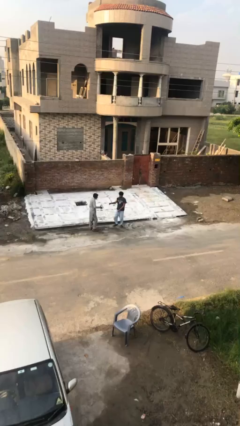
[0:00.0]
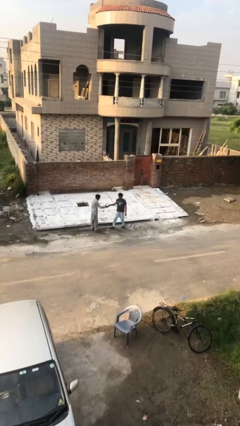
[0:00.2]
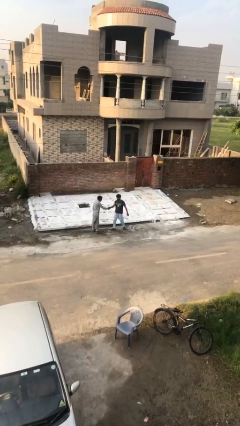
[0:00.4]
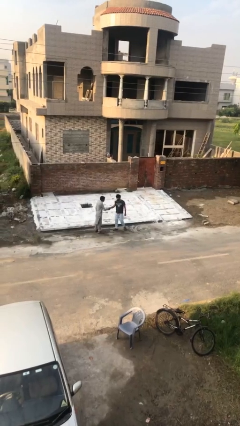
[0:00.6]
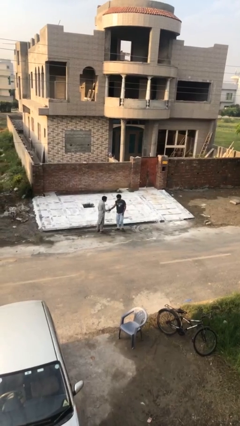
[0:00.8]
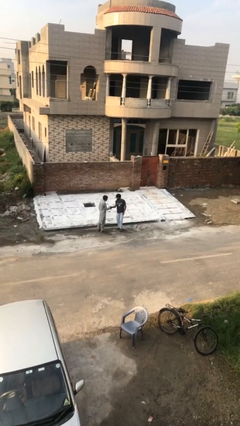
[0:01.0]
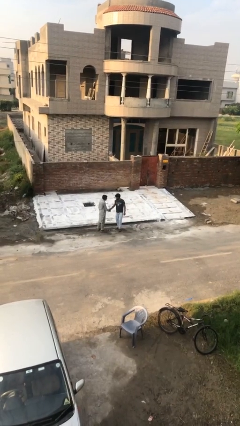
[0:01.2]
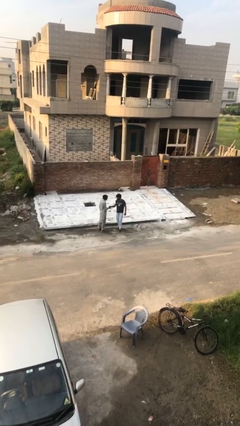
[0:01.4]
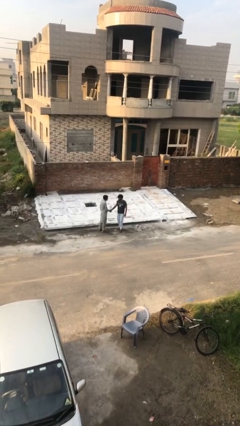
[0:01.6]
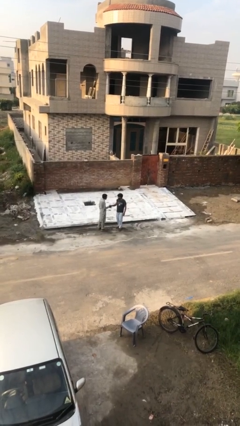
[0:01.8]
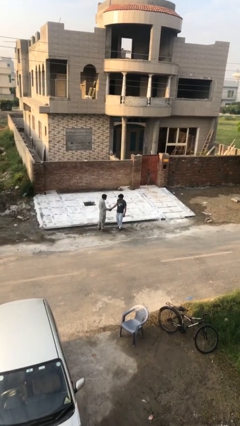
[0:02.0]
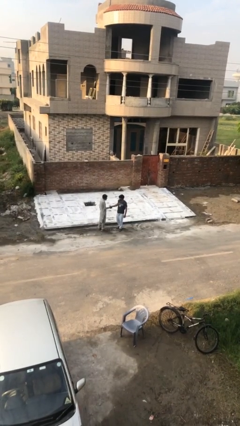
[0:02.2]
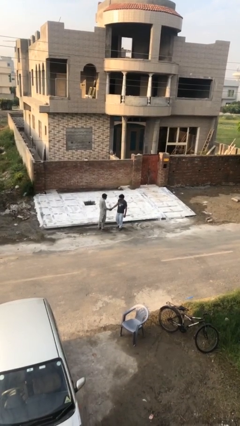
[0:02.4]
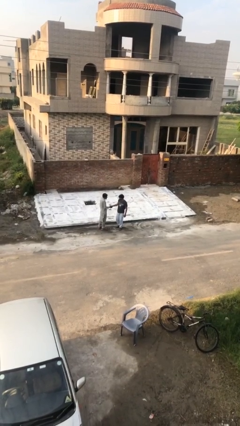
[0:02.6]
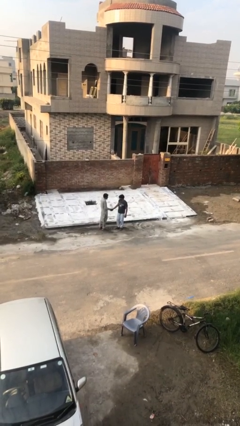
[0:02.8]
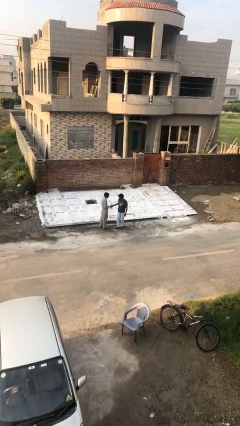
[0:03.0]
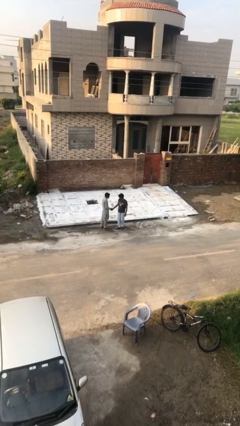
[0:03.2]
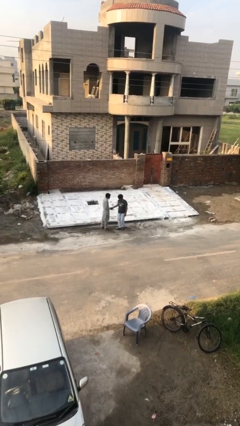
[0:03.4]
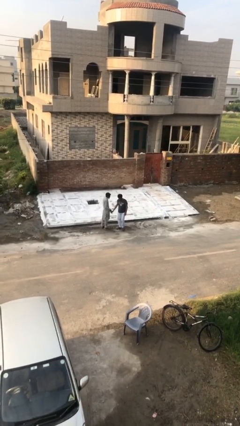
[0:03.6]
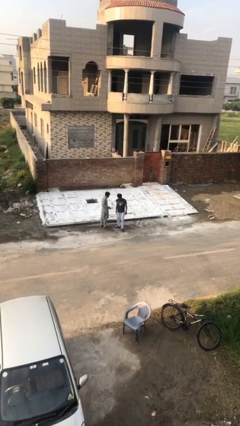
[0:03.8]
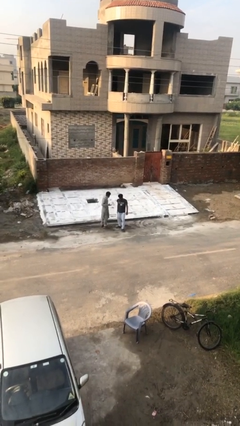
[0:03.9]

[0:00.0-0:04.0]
person shakes hand

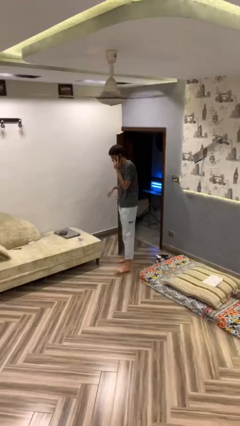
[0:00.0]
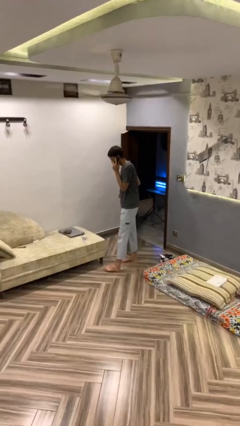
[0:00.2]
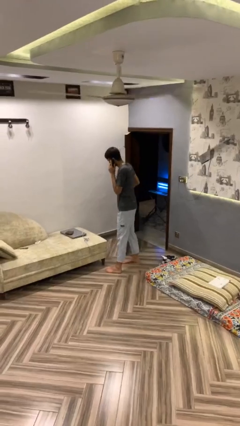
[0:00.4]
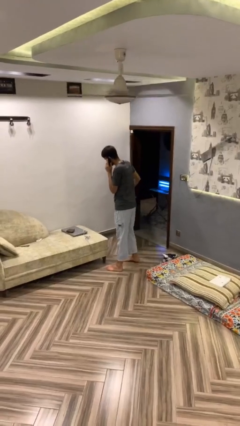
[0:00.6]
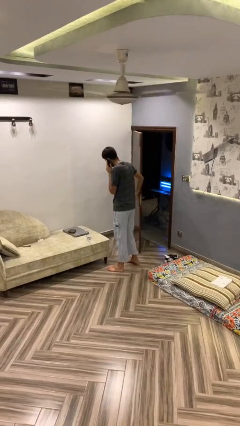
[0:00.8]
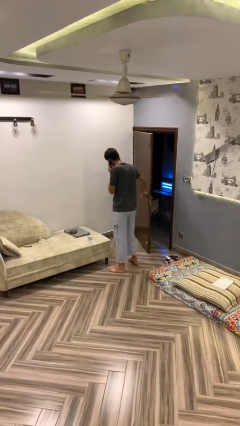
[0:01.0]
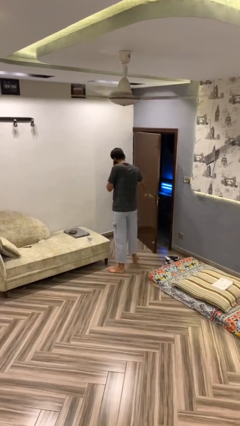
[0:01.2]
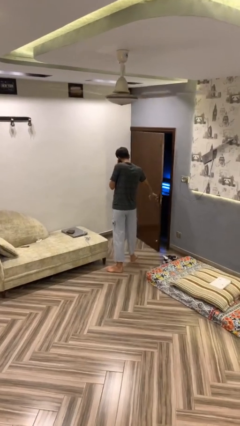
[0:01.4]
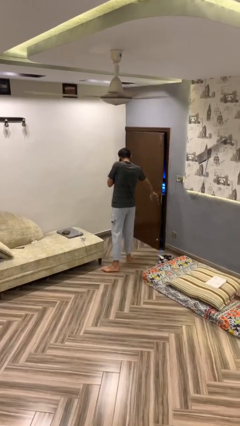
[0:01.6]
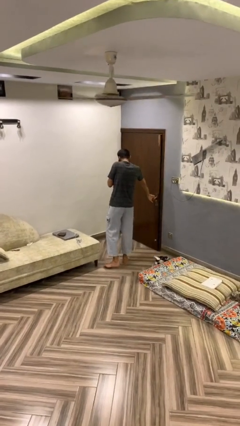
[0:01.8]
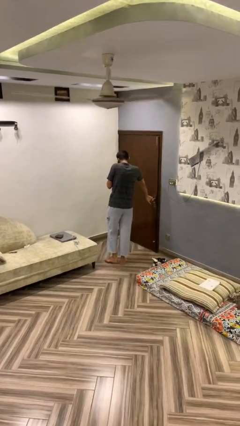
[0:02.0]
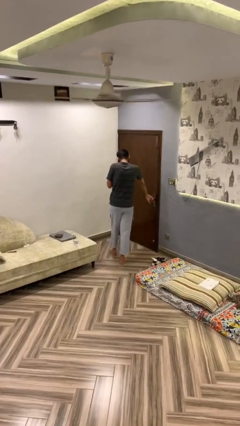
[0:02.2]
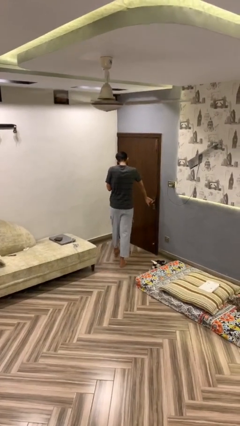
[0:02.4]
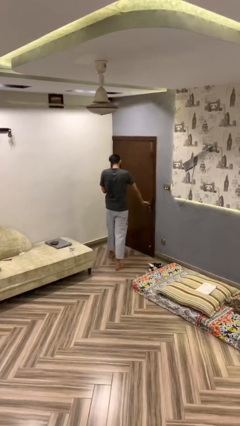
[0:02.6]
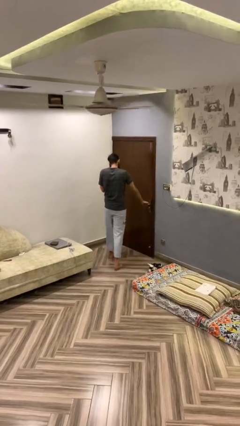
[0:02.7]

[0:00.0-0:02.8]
person closes facility door

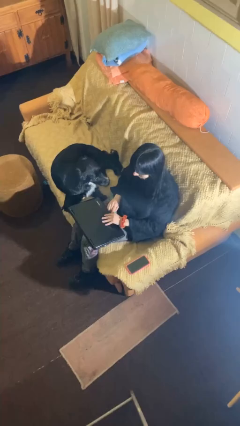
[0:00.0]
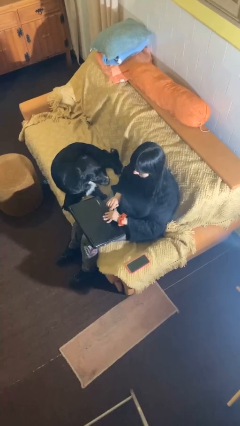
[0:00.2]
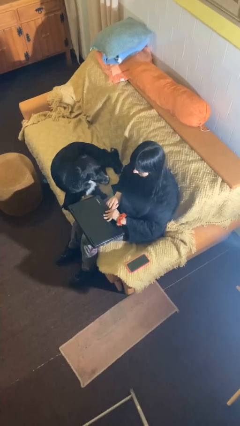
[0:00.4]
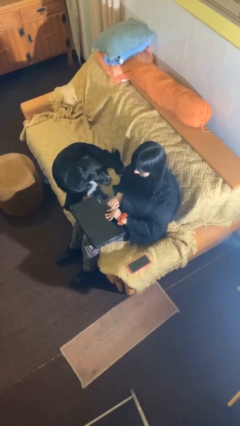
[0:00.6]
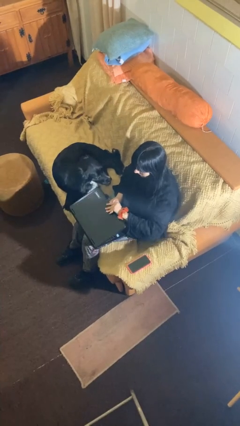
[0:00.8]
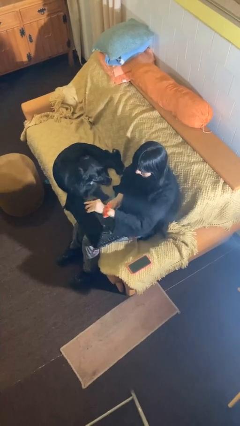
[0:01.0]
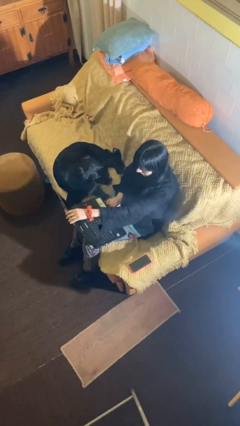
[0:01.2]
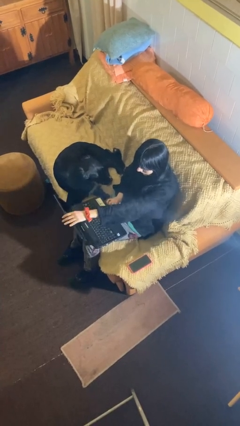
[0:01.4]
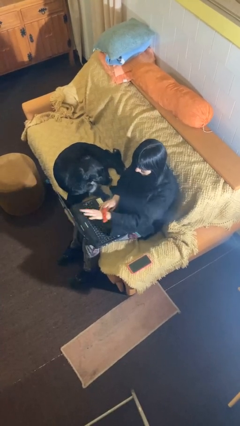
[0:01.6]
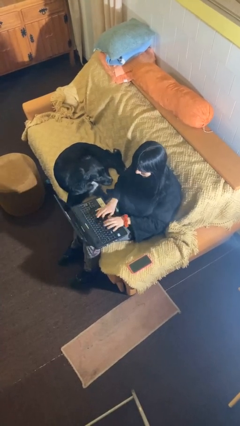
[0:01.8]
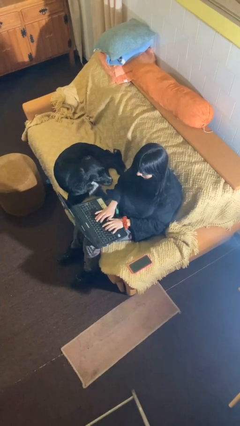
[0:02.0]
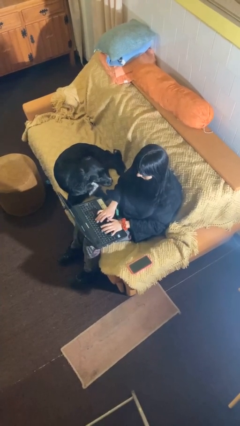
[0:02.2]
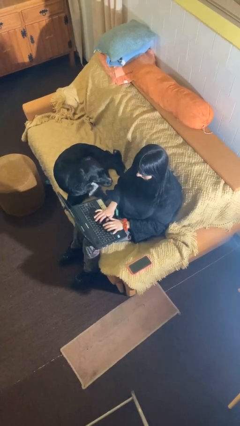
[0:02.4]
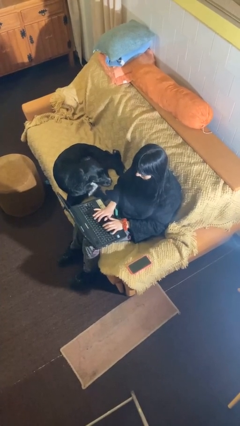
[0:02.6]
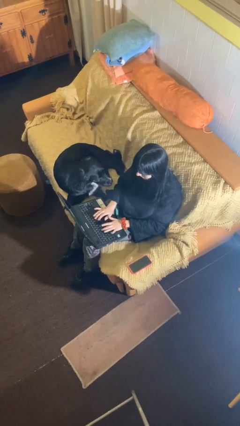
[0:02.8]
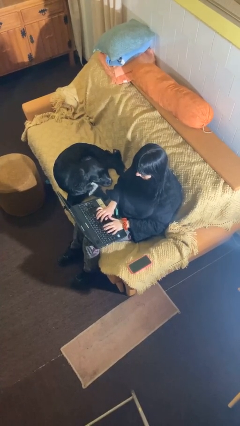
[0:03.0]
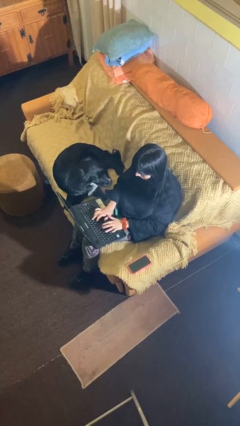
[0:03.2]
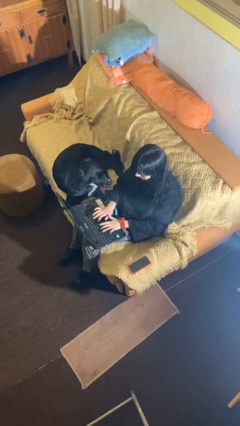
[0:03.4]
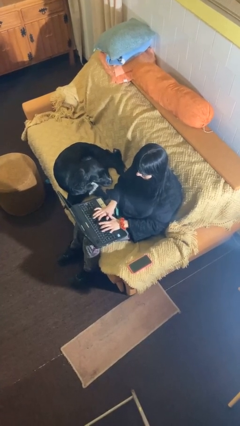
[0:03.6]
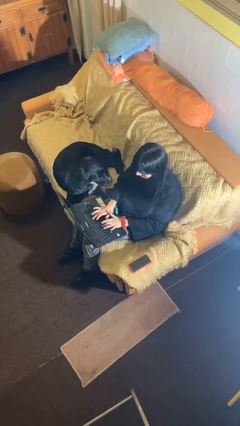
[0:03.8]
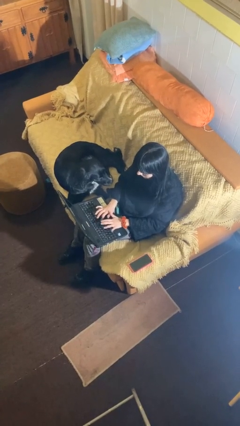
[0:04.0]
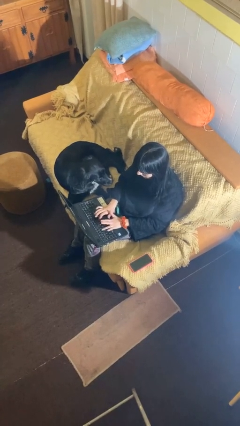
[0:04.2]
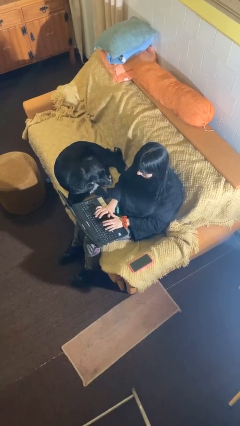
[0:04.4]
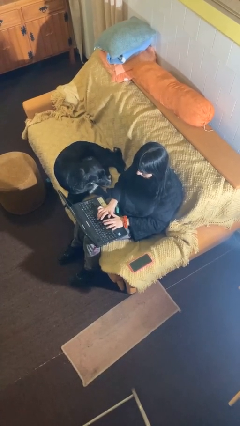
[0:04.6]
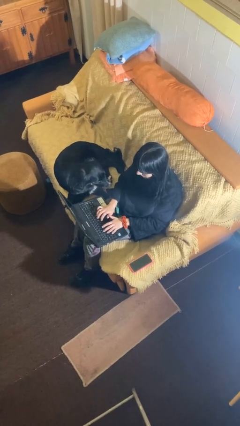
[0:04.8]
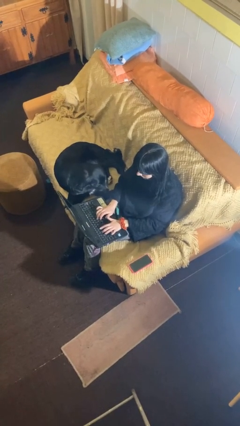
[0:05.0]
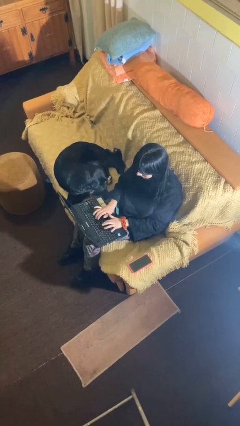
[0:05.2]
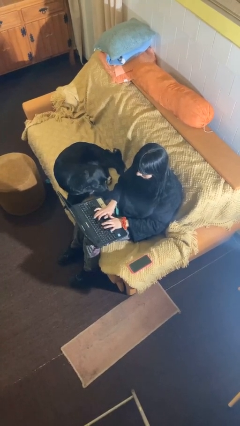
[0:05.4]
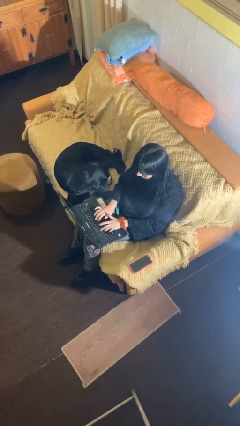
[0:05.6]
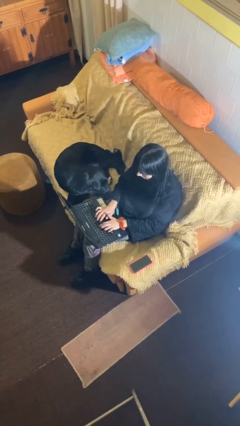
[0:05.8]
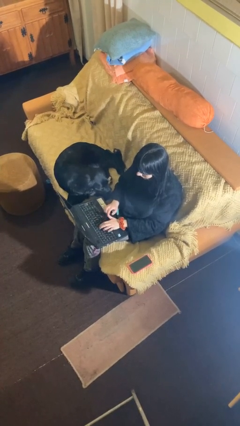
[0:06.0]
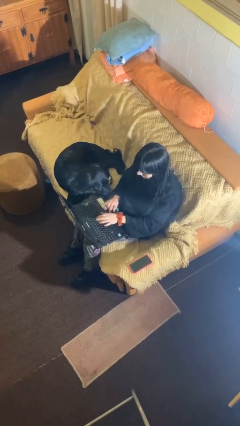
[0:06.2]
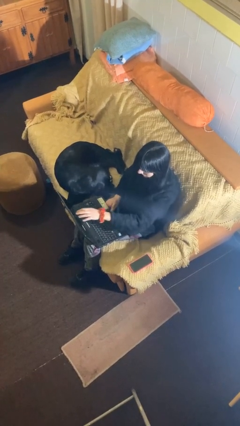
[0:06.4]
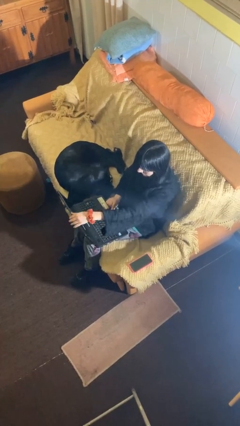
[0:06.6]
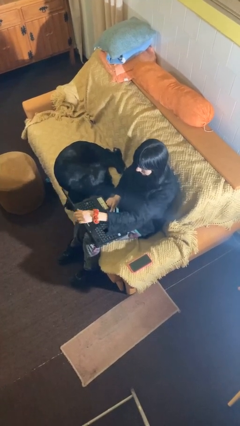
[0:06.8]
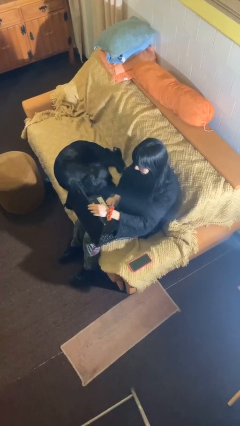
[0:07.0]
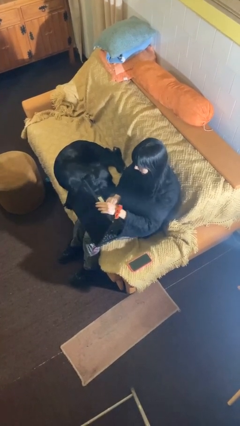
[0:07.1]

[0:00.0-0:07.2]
person interacts with laptop

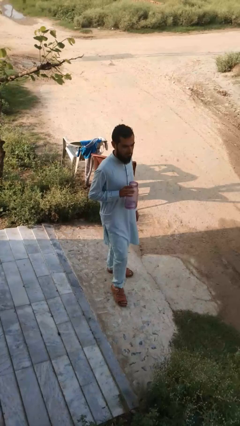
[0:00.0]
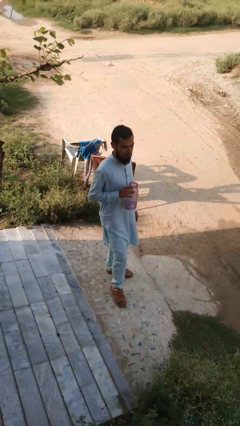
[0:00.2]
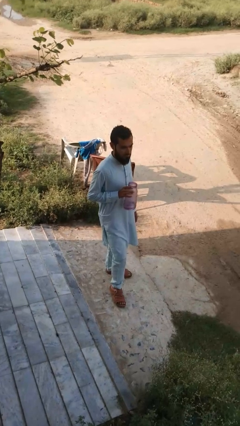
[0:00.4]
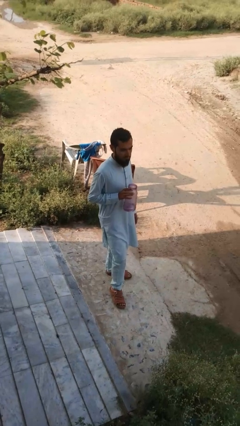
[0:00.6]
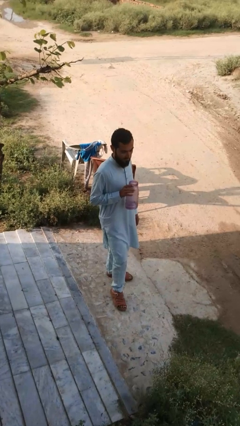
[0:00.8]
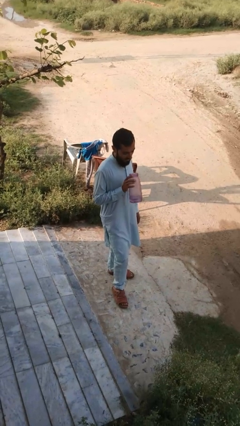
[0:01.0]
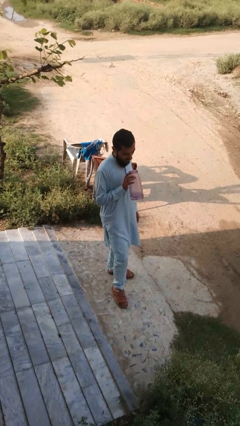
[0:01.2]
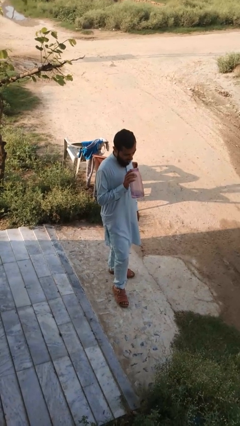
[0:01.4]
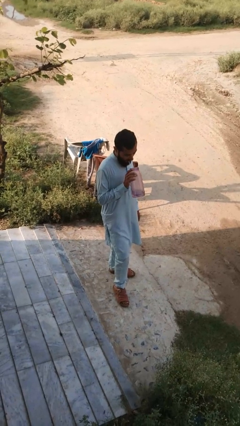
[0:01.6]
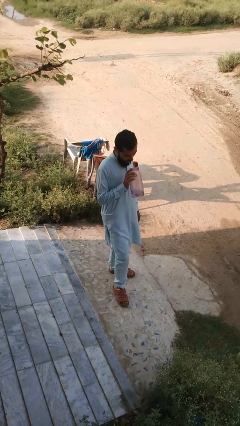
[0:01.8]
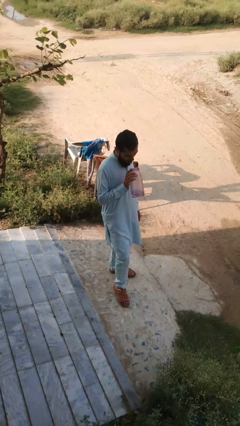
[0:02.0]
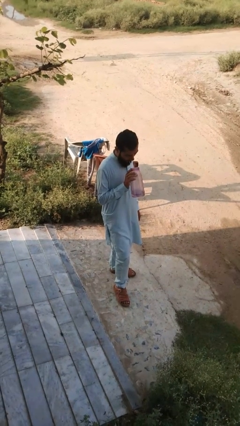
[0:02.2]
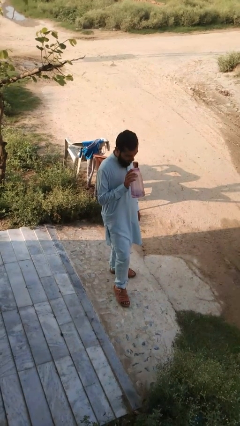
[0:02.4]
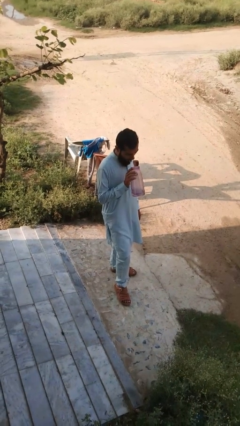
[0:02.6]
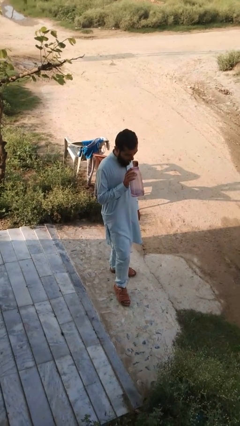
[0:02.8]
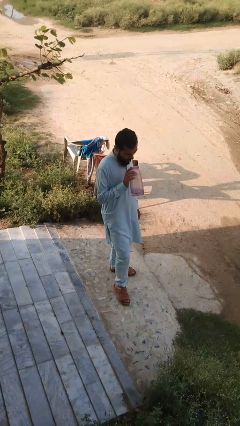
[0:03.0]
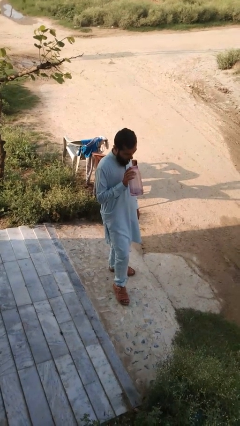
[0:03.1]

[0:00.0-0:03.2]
person drinks from straw

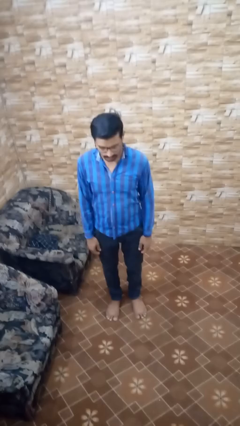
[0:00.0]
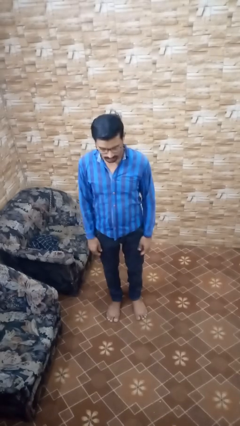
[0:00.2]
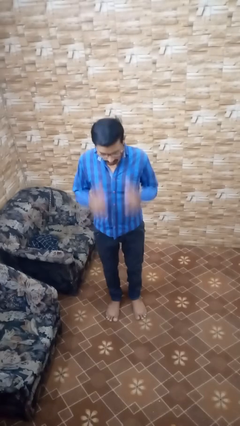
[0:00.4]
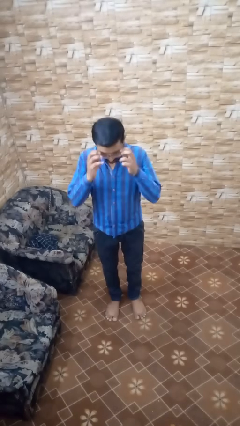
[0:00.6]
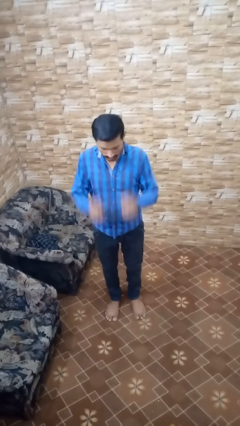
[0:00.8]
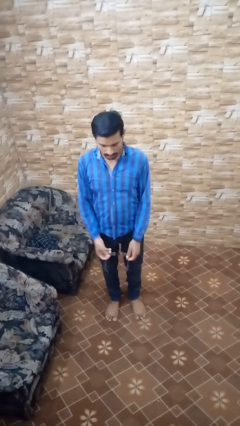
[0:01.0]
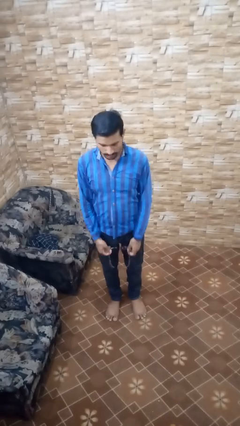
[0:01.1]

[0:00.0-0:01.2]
person takes off glasses
